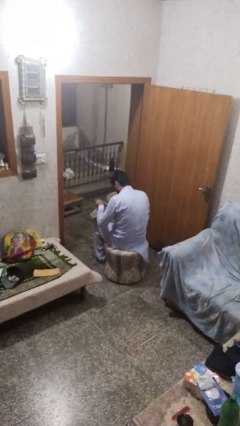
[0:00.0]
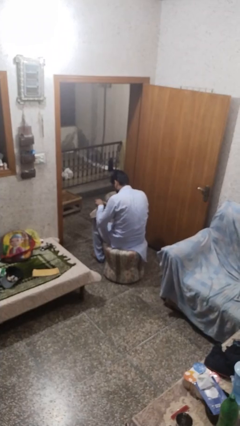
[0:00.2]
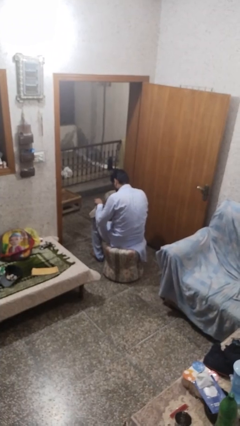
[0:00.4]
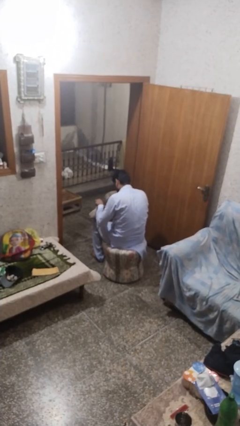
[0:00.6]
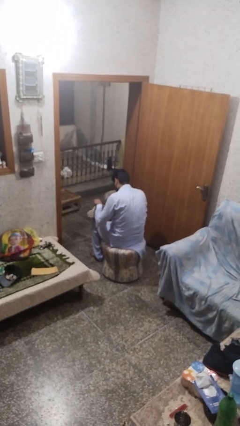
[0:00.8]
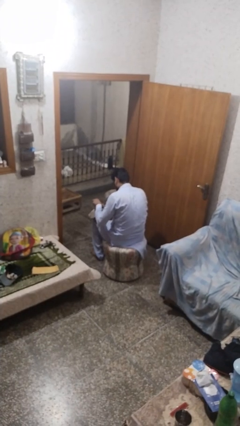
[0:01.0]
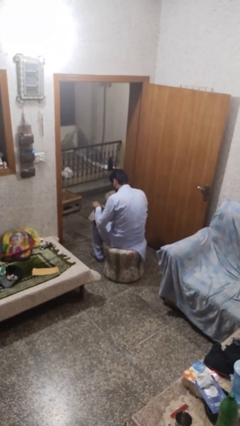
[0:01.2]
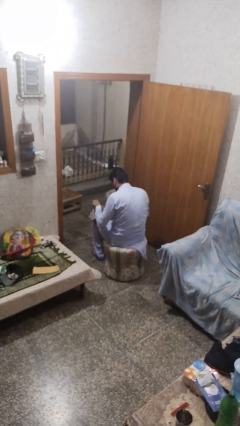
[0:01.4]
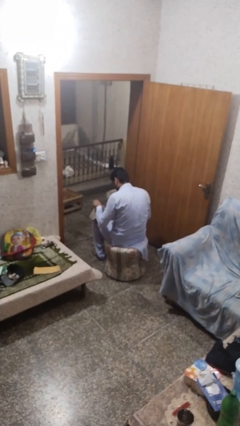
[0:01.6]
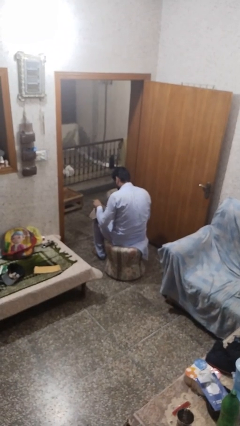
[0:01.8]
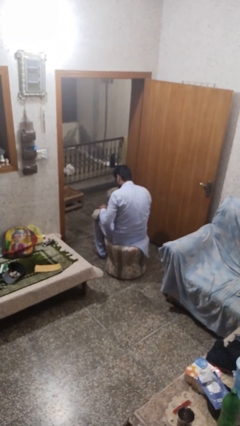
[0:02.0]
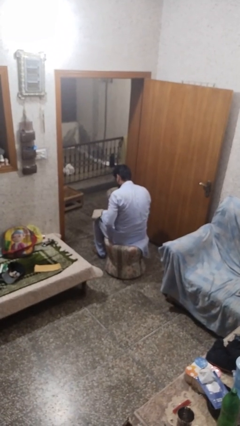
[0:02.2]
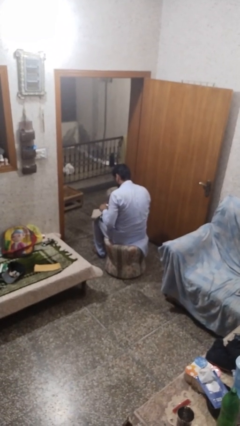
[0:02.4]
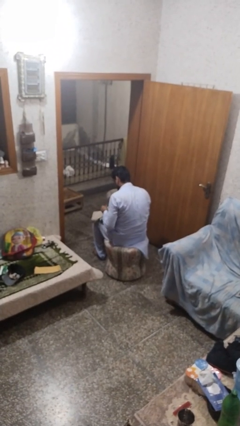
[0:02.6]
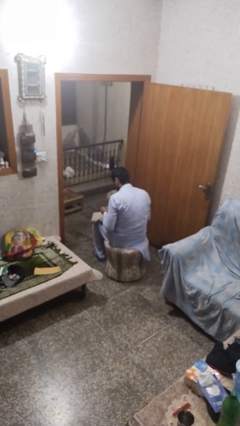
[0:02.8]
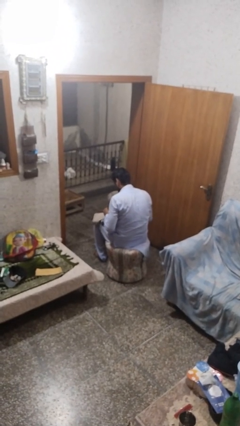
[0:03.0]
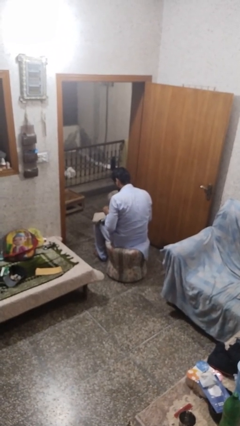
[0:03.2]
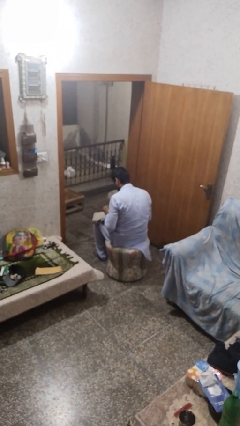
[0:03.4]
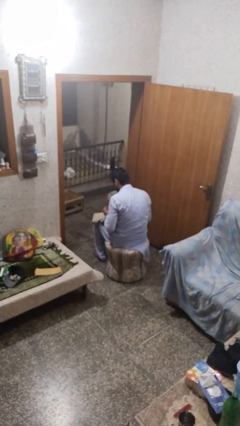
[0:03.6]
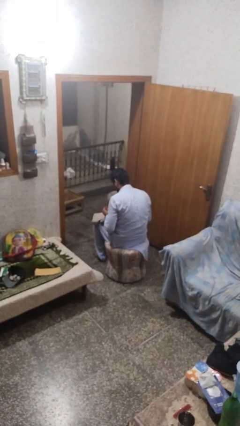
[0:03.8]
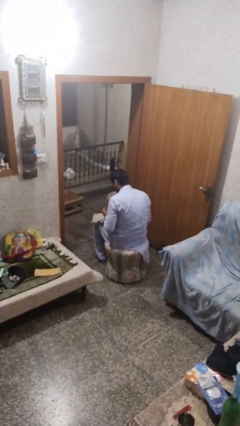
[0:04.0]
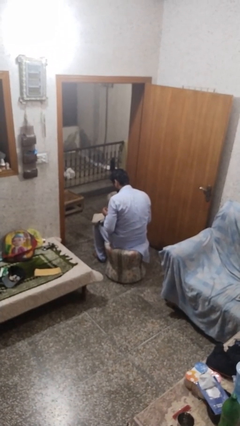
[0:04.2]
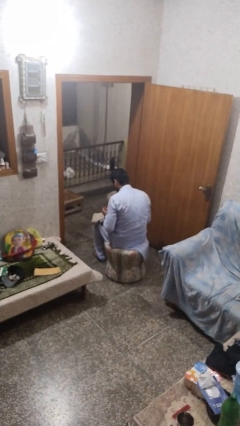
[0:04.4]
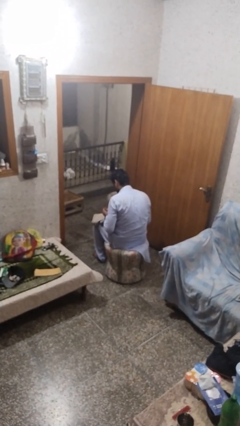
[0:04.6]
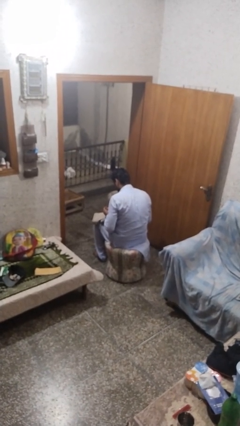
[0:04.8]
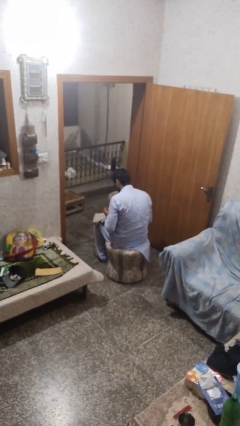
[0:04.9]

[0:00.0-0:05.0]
person takes object from purse

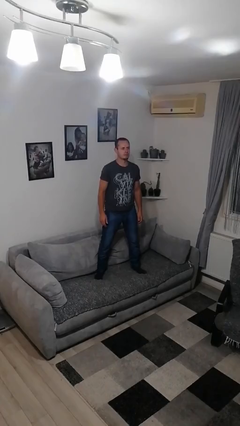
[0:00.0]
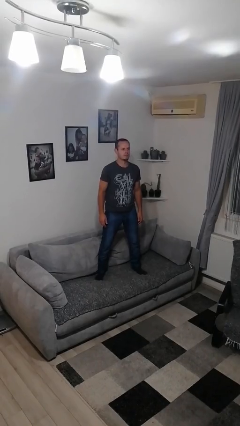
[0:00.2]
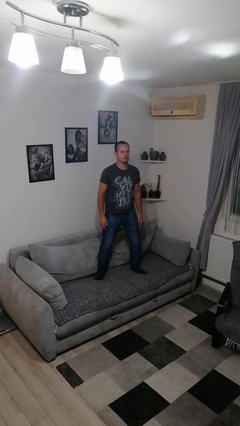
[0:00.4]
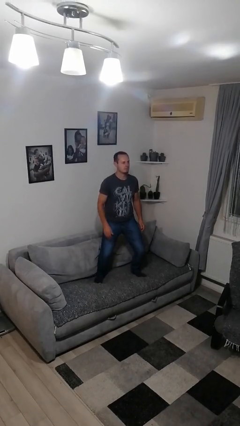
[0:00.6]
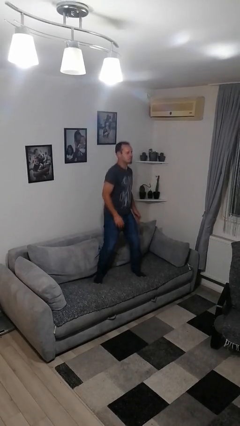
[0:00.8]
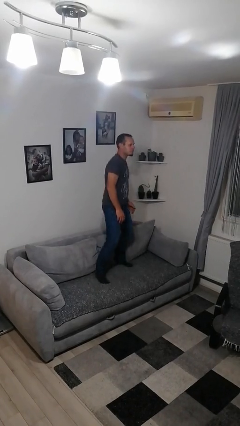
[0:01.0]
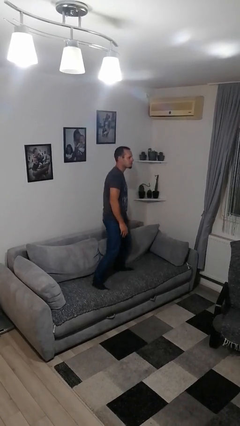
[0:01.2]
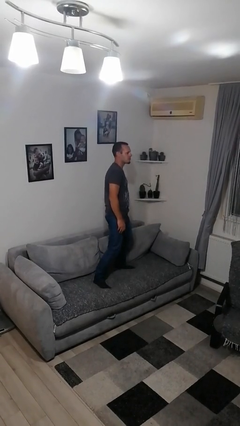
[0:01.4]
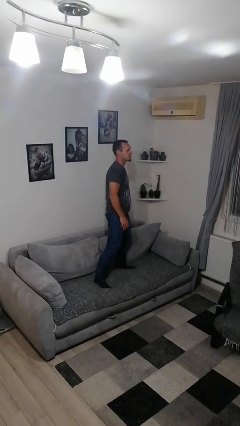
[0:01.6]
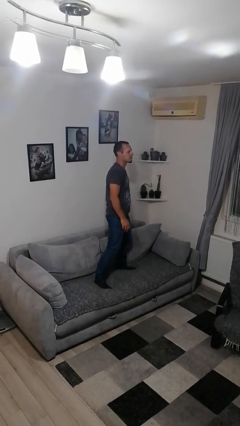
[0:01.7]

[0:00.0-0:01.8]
person jumps on couch

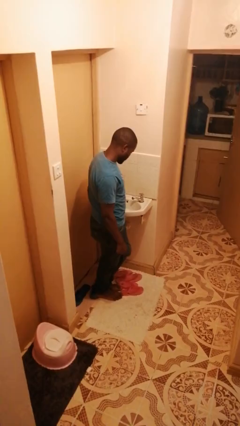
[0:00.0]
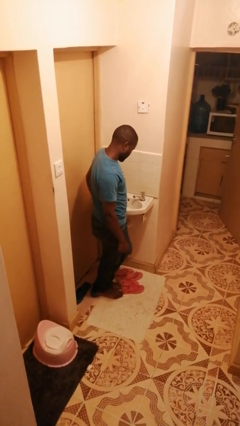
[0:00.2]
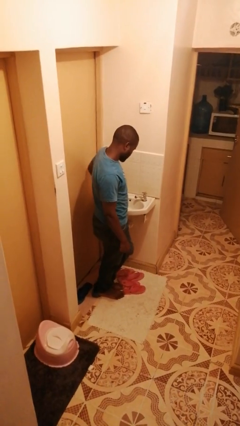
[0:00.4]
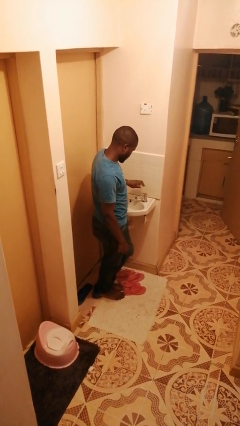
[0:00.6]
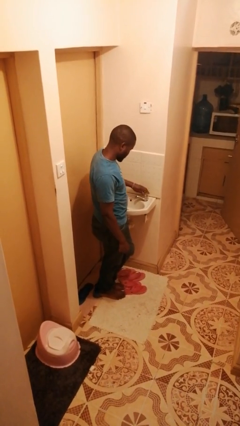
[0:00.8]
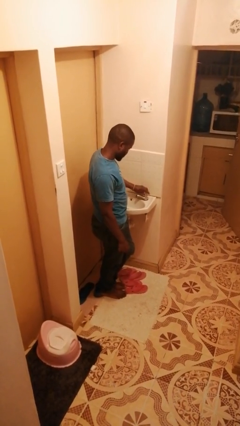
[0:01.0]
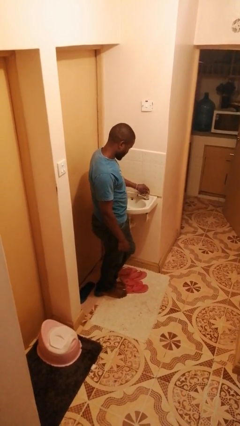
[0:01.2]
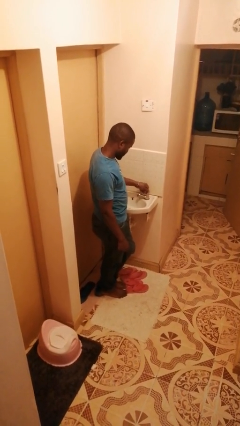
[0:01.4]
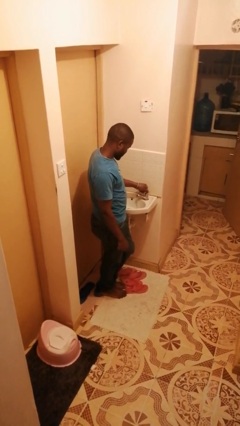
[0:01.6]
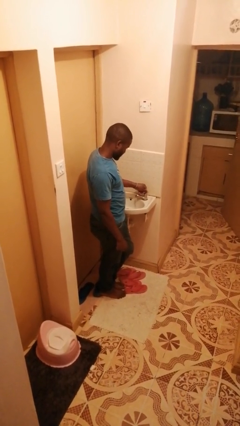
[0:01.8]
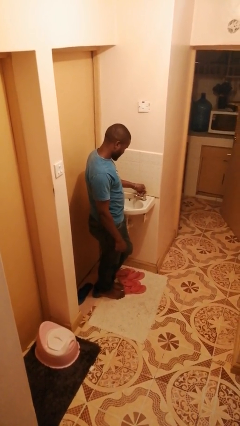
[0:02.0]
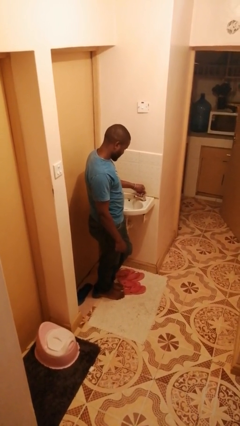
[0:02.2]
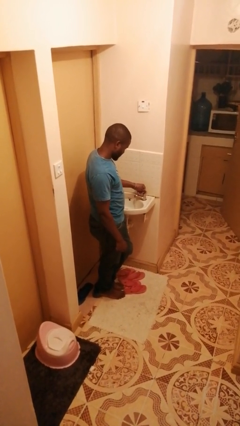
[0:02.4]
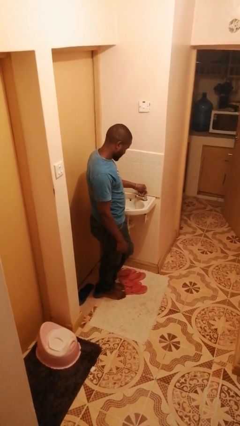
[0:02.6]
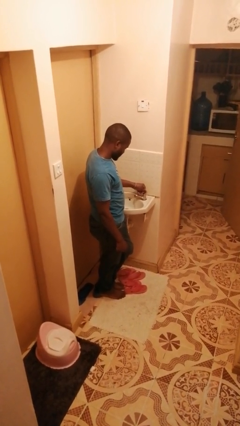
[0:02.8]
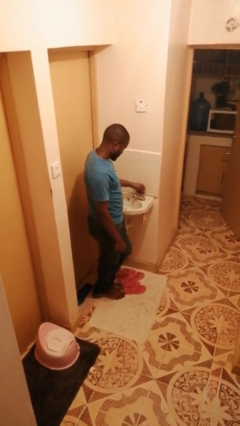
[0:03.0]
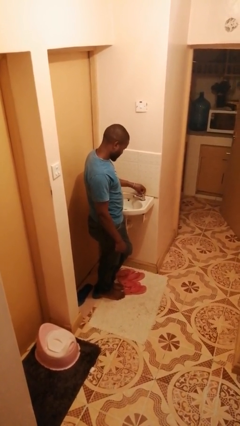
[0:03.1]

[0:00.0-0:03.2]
person turns on faucet

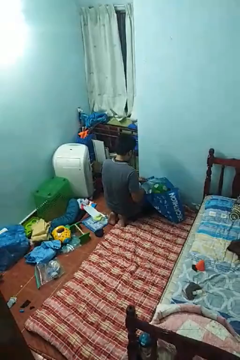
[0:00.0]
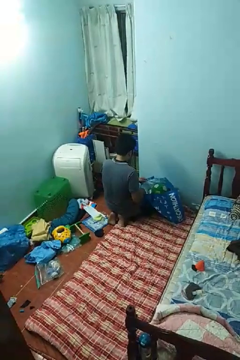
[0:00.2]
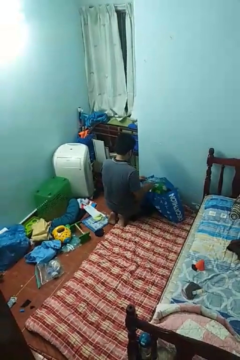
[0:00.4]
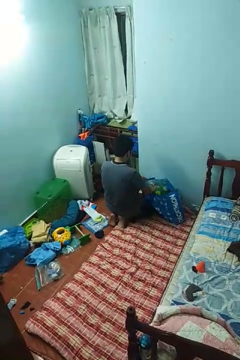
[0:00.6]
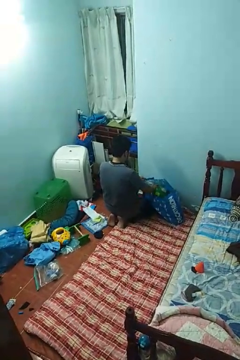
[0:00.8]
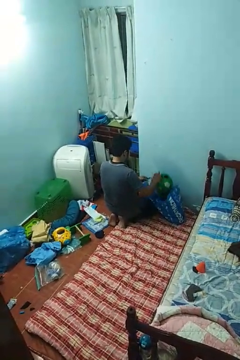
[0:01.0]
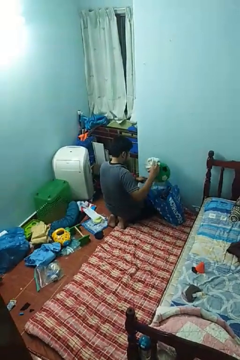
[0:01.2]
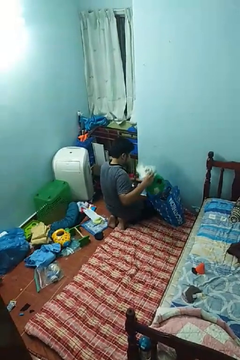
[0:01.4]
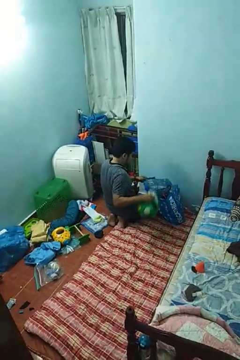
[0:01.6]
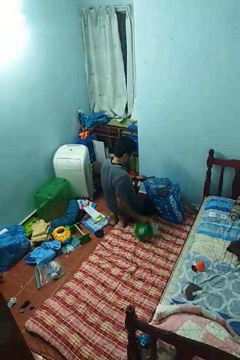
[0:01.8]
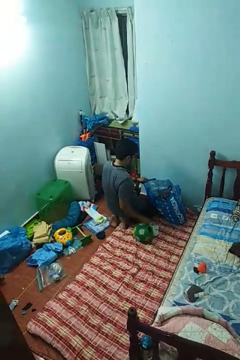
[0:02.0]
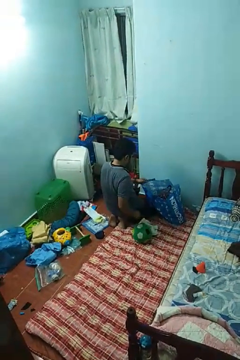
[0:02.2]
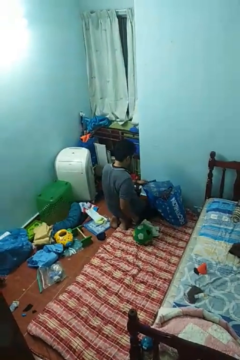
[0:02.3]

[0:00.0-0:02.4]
person takes object from bag

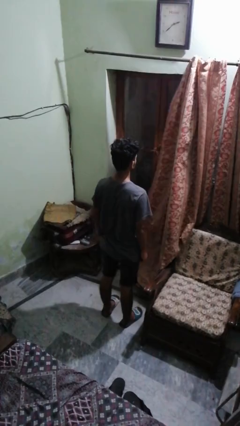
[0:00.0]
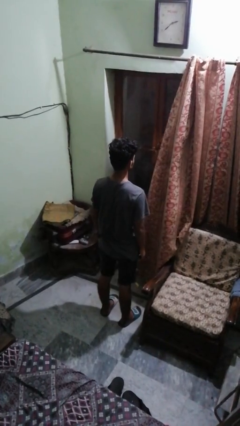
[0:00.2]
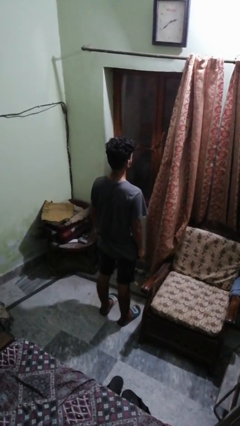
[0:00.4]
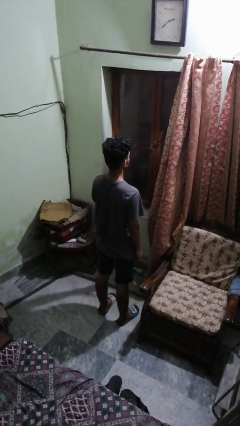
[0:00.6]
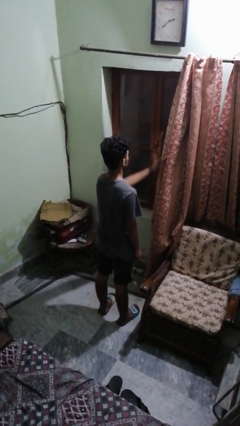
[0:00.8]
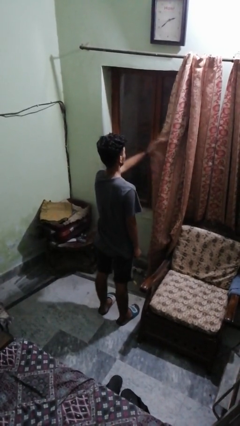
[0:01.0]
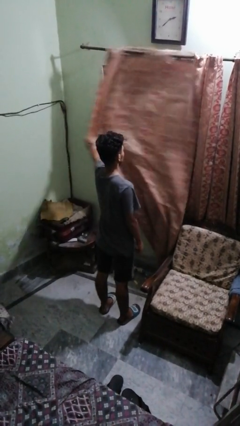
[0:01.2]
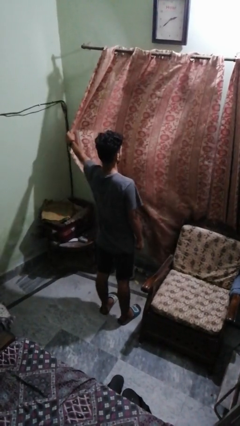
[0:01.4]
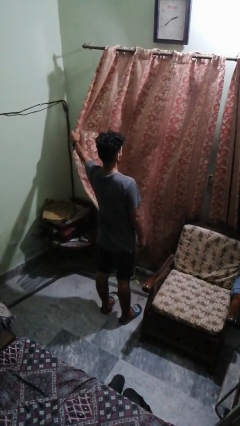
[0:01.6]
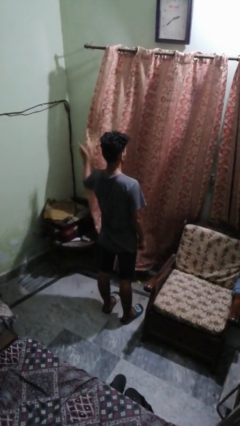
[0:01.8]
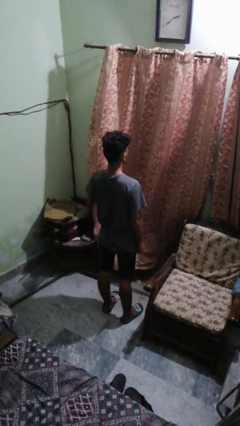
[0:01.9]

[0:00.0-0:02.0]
person closes curtains

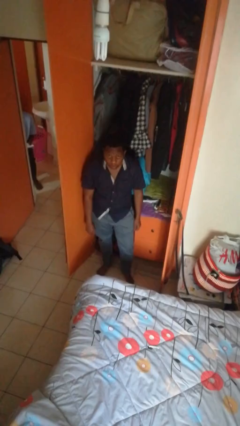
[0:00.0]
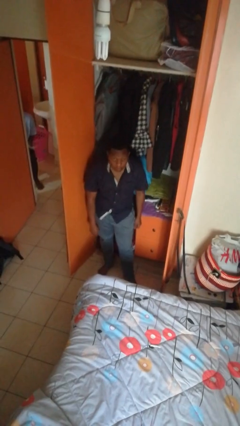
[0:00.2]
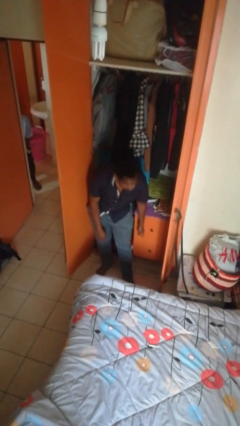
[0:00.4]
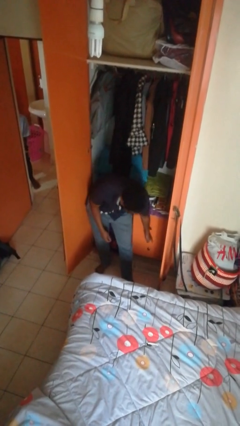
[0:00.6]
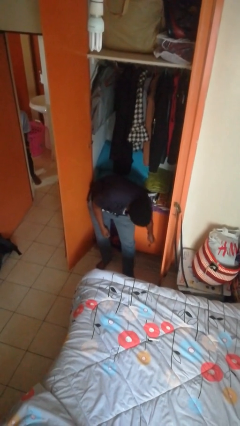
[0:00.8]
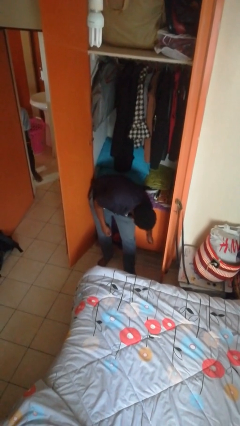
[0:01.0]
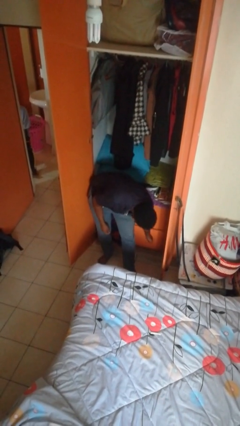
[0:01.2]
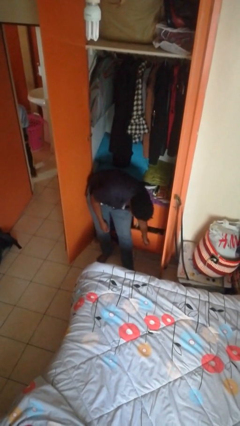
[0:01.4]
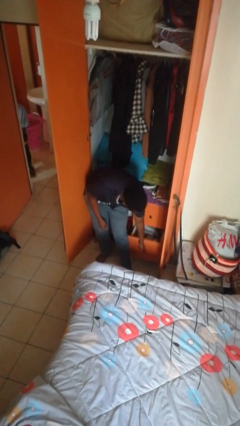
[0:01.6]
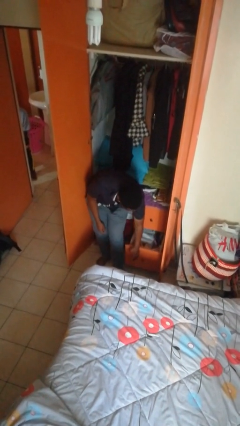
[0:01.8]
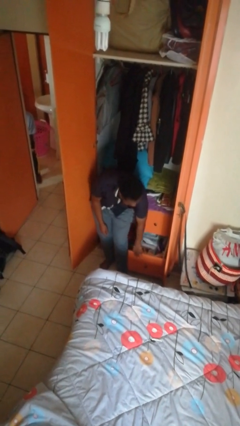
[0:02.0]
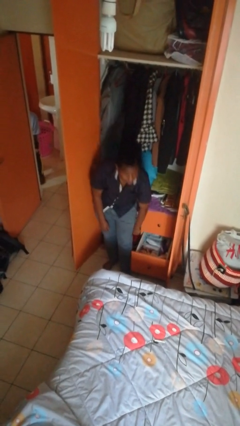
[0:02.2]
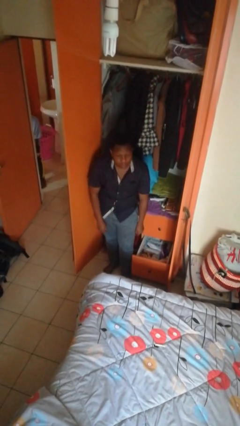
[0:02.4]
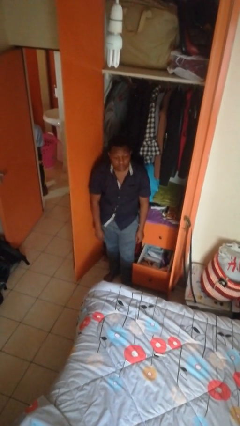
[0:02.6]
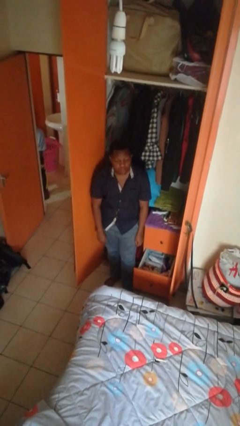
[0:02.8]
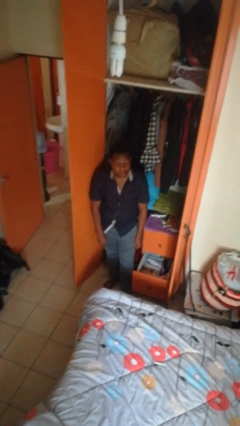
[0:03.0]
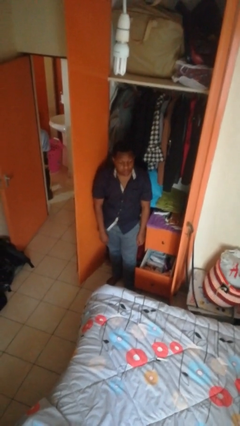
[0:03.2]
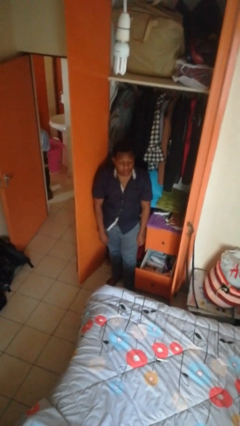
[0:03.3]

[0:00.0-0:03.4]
person opens dresser drawer

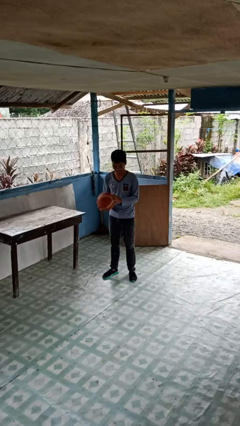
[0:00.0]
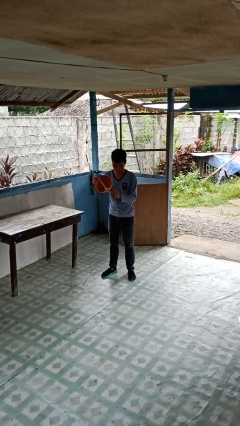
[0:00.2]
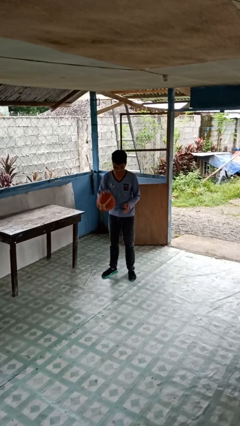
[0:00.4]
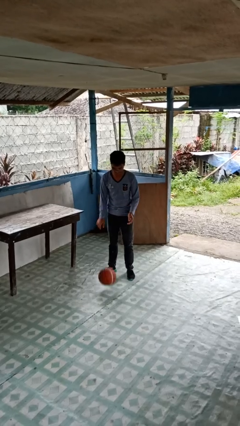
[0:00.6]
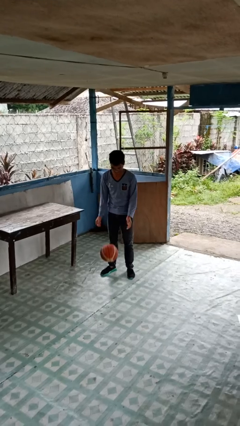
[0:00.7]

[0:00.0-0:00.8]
person bounces ball on floor
